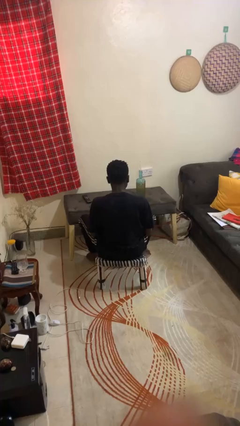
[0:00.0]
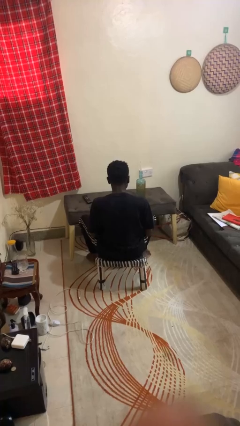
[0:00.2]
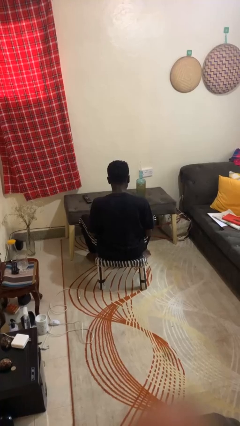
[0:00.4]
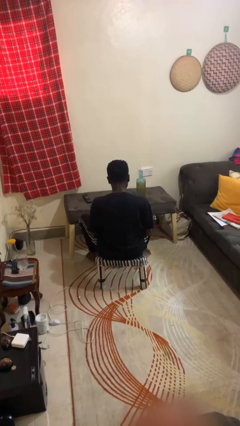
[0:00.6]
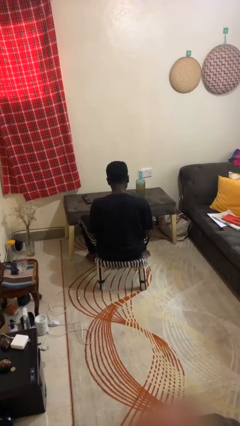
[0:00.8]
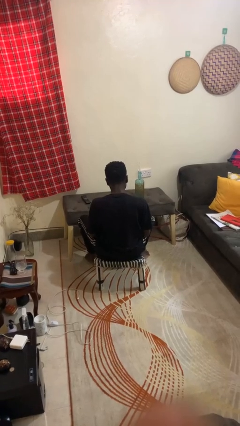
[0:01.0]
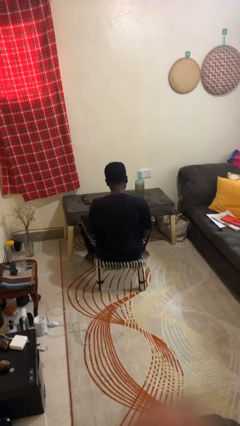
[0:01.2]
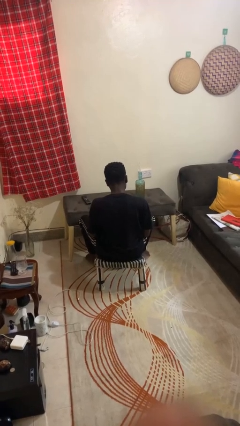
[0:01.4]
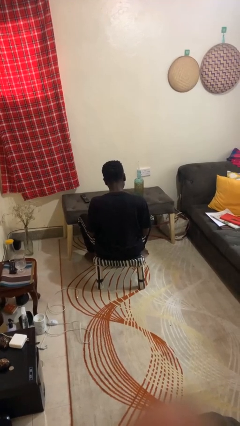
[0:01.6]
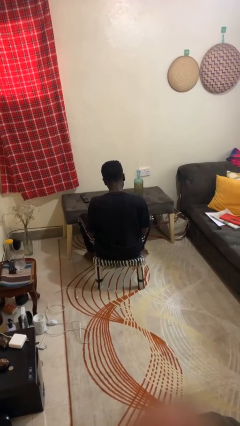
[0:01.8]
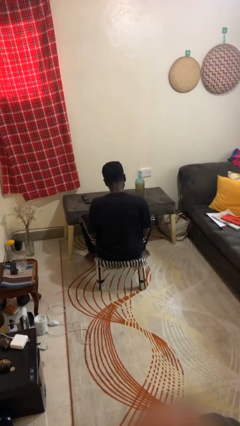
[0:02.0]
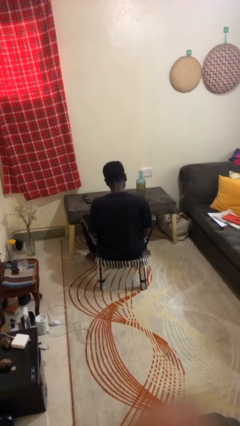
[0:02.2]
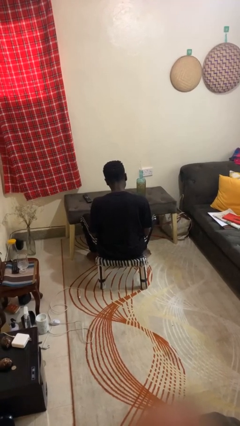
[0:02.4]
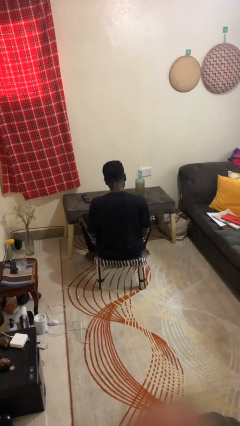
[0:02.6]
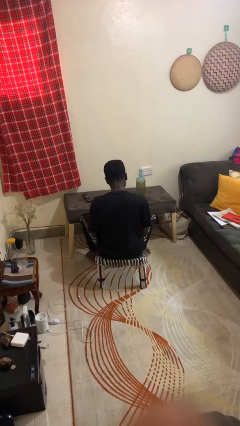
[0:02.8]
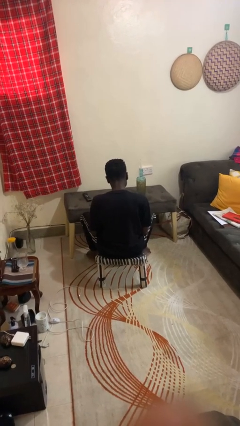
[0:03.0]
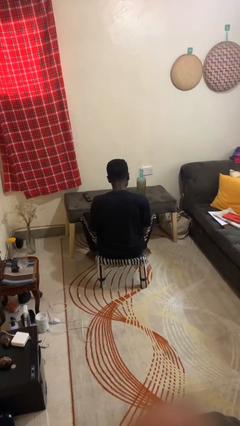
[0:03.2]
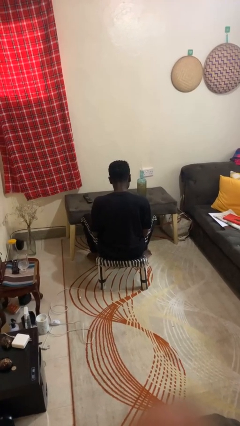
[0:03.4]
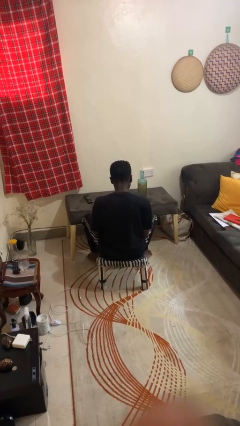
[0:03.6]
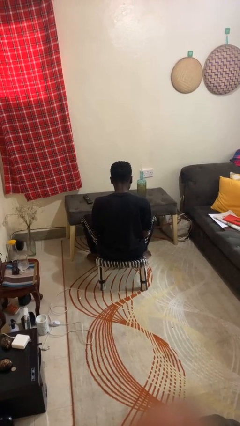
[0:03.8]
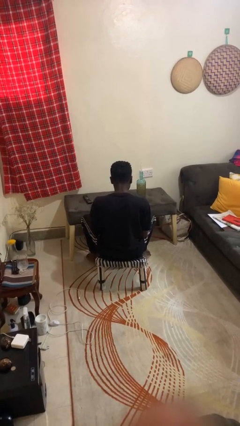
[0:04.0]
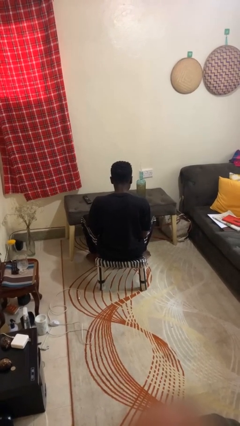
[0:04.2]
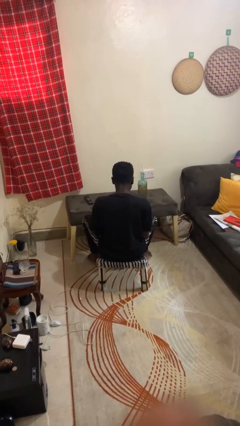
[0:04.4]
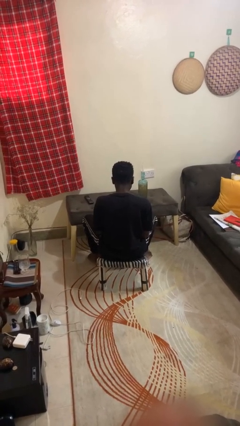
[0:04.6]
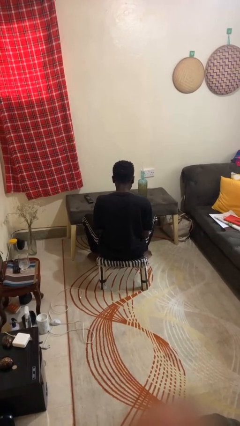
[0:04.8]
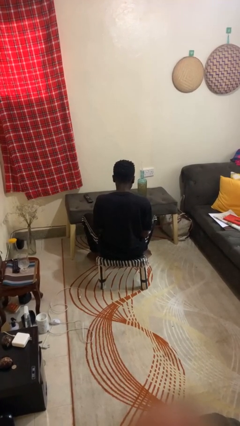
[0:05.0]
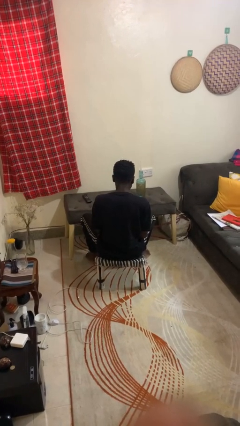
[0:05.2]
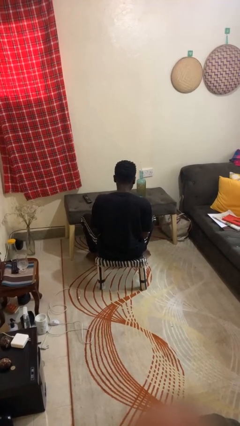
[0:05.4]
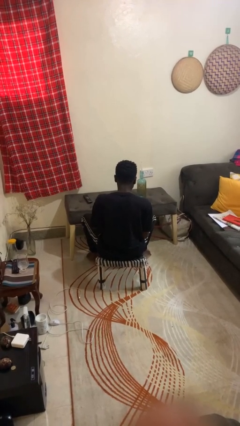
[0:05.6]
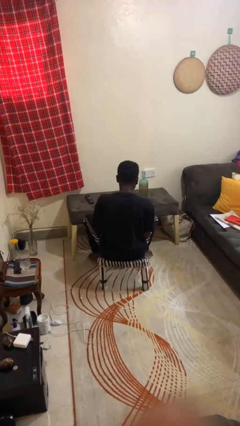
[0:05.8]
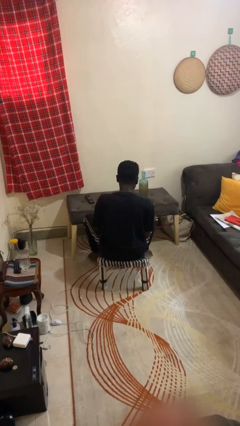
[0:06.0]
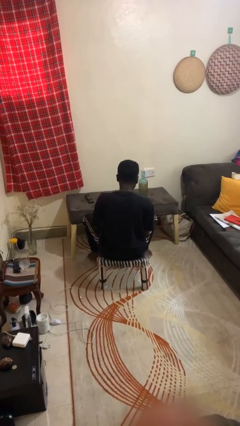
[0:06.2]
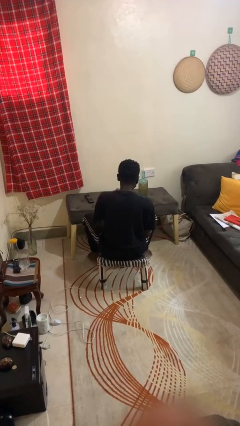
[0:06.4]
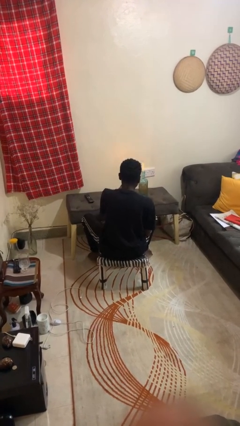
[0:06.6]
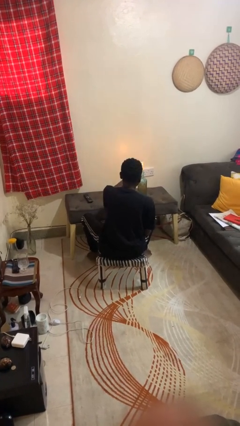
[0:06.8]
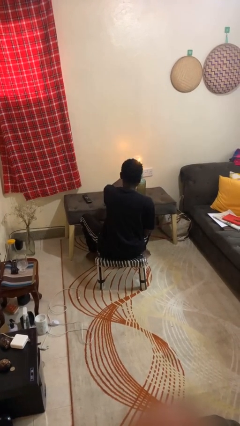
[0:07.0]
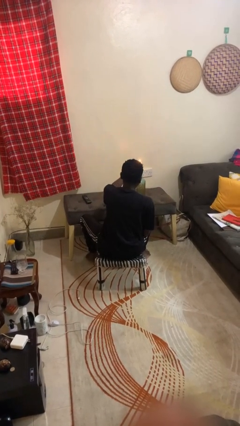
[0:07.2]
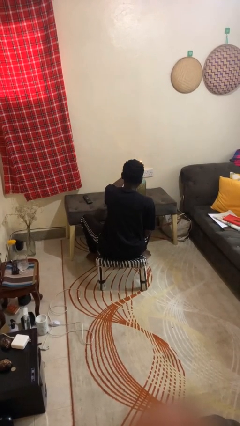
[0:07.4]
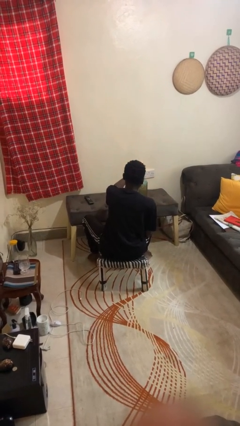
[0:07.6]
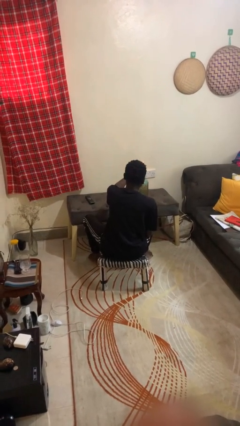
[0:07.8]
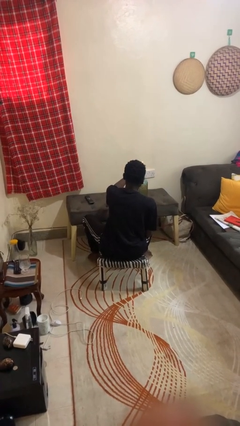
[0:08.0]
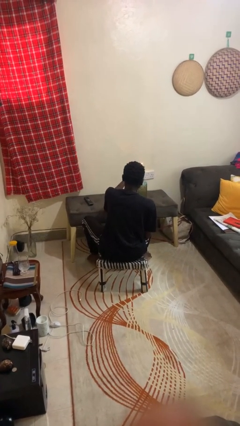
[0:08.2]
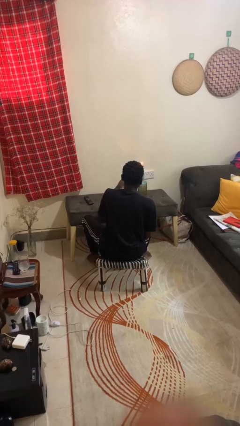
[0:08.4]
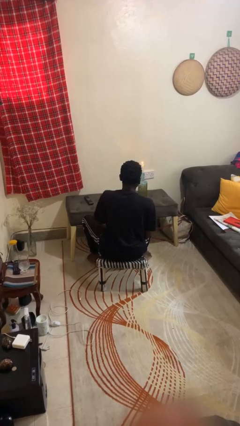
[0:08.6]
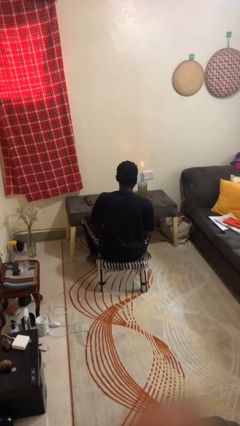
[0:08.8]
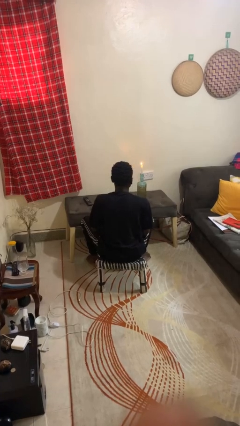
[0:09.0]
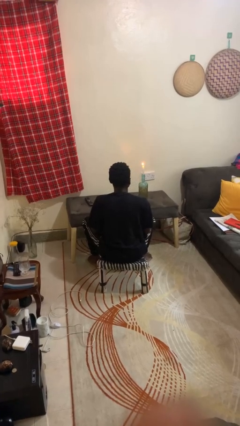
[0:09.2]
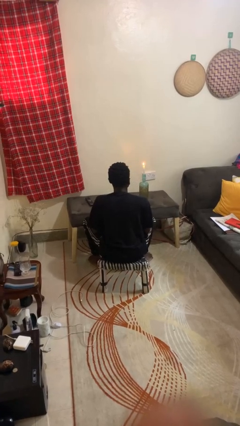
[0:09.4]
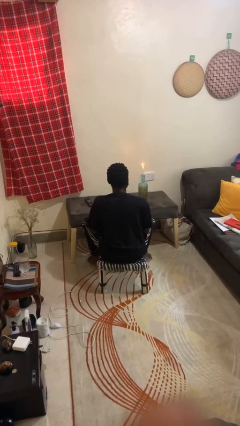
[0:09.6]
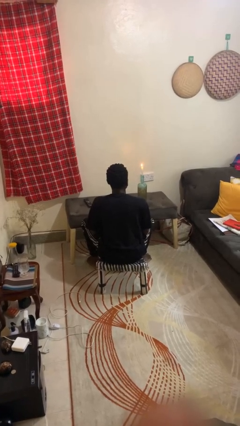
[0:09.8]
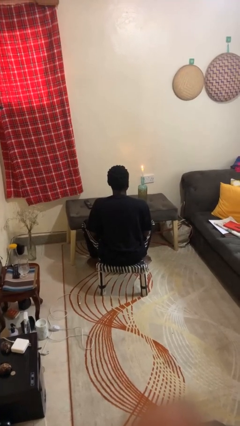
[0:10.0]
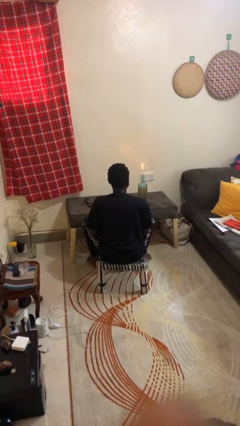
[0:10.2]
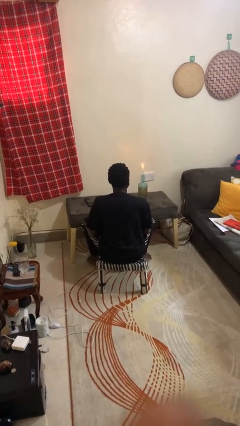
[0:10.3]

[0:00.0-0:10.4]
person lights candle

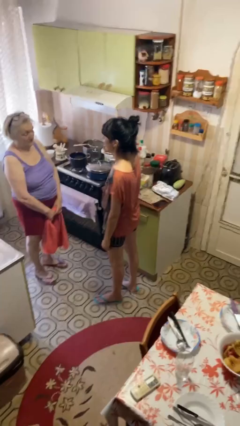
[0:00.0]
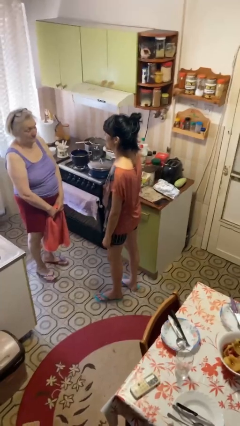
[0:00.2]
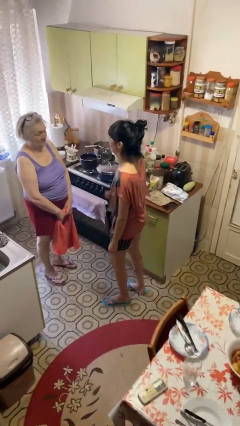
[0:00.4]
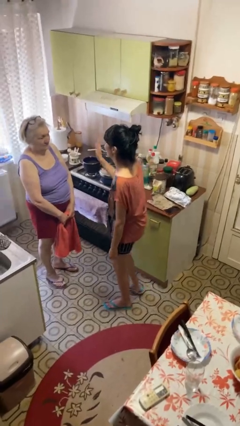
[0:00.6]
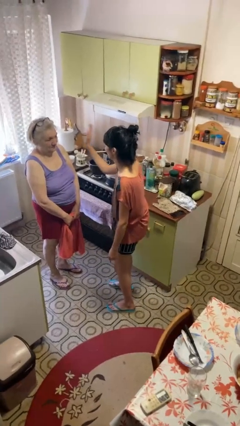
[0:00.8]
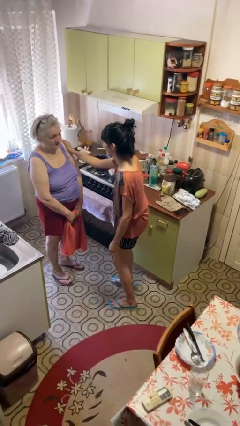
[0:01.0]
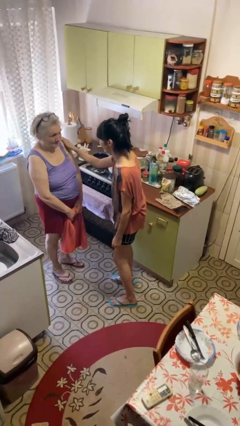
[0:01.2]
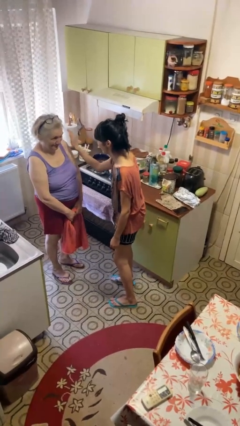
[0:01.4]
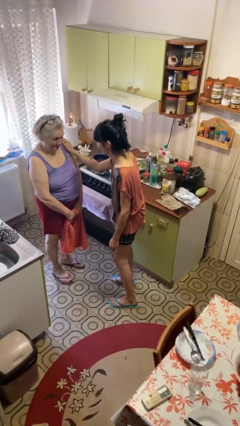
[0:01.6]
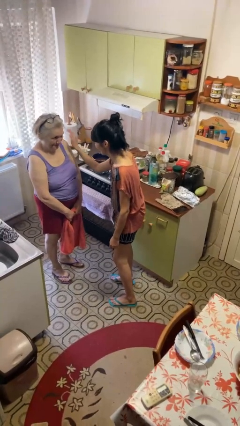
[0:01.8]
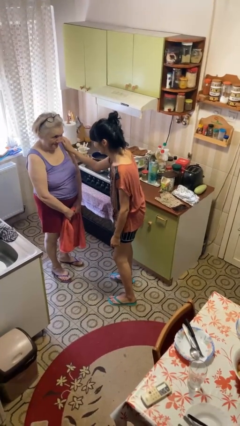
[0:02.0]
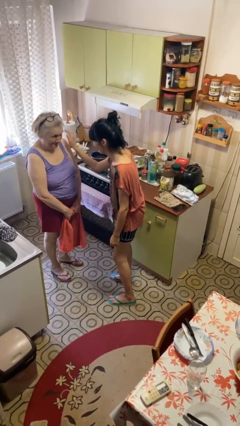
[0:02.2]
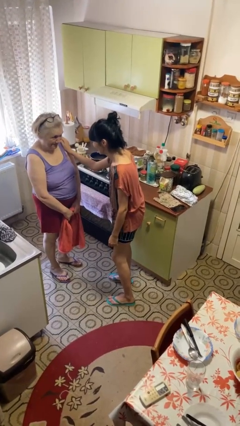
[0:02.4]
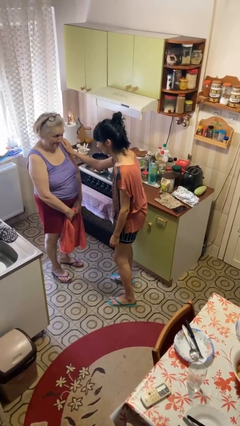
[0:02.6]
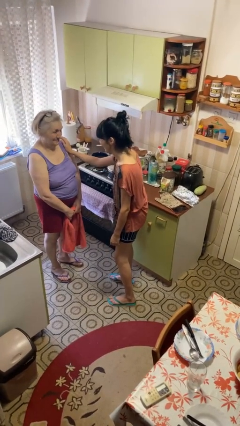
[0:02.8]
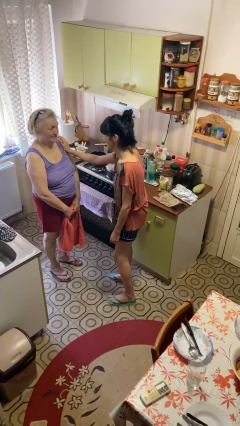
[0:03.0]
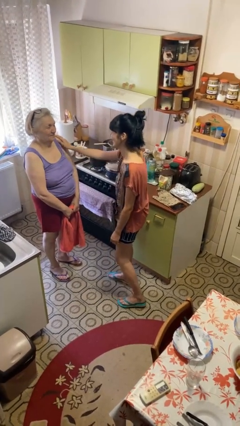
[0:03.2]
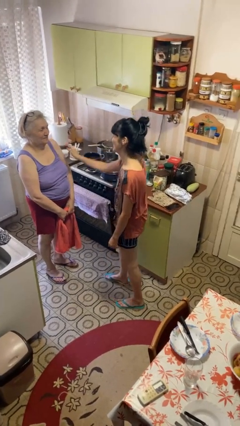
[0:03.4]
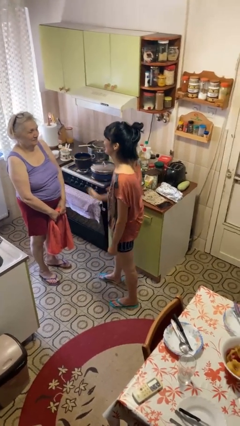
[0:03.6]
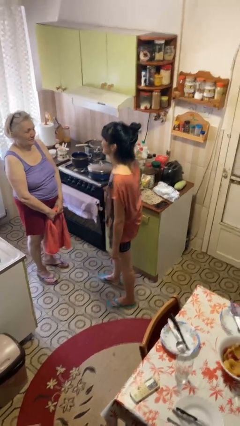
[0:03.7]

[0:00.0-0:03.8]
person pounds shoulders of person

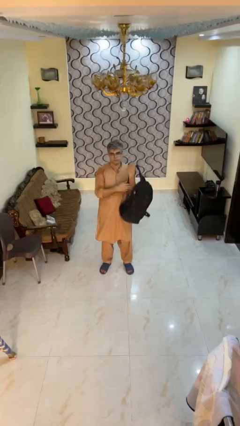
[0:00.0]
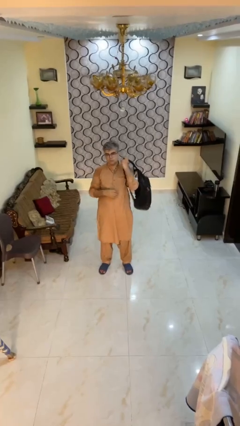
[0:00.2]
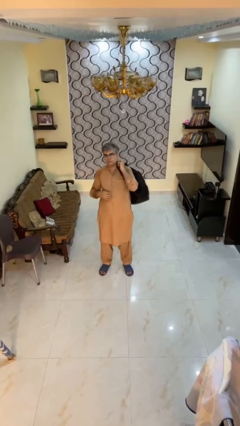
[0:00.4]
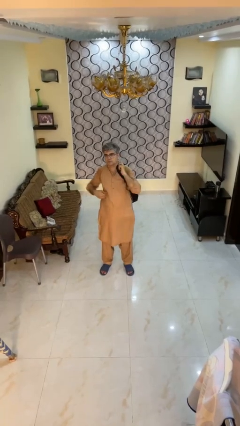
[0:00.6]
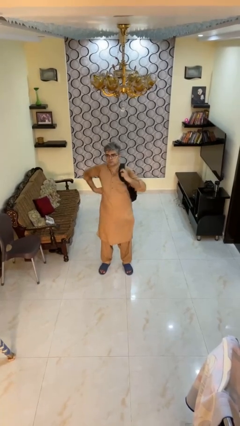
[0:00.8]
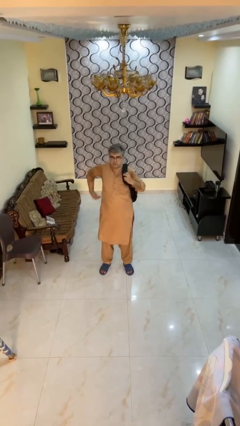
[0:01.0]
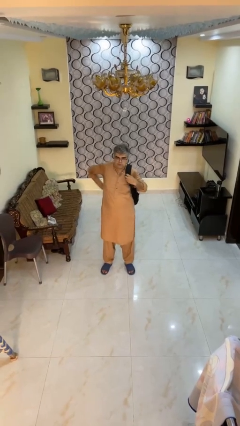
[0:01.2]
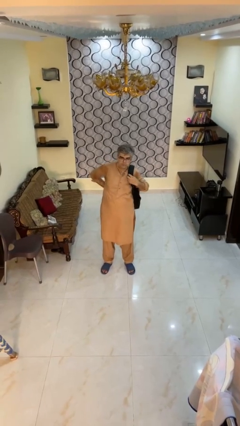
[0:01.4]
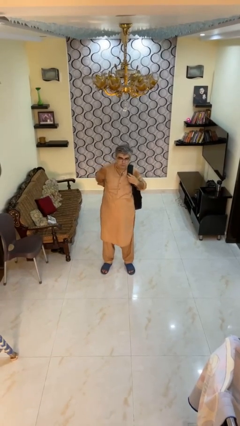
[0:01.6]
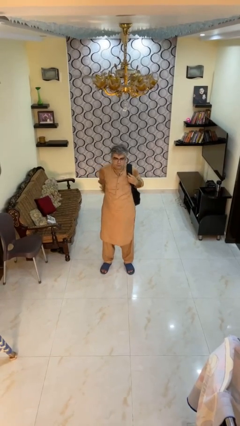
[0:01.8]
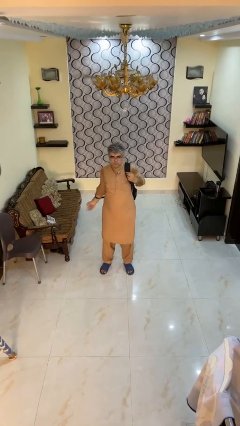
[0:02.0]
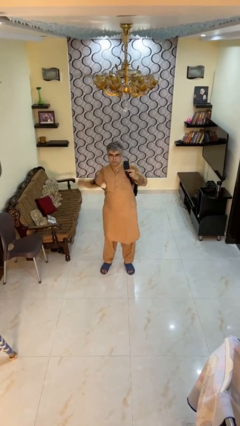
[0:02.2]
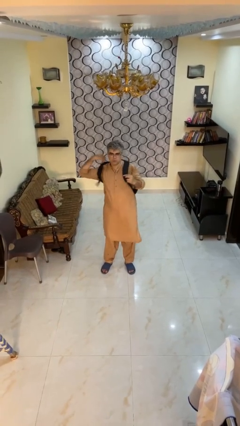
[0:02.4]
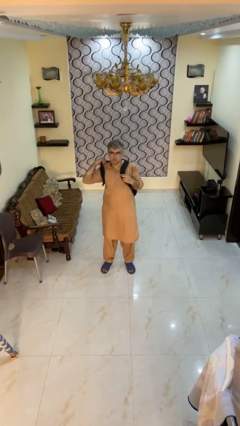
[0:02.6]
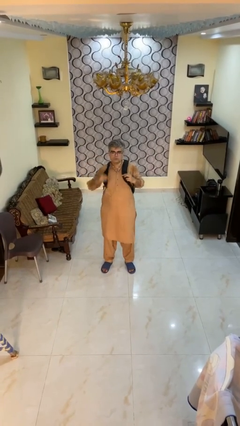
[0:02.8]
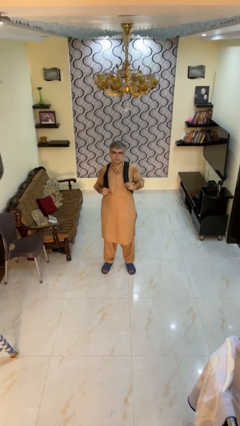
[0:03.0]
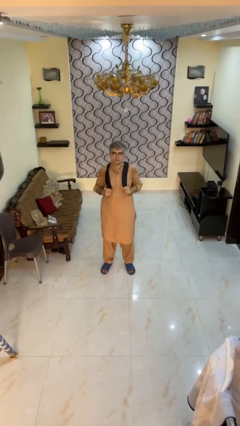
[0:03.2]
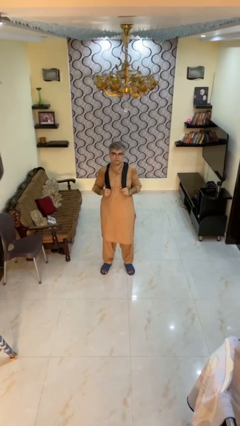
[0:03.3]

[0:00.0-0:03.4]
person puts on backpack
